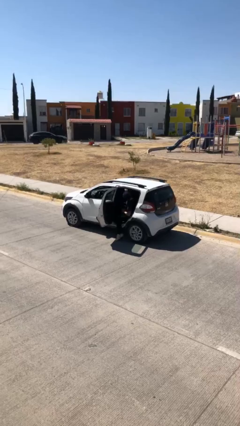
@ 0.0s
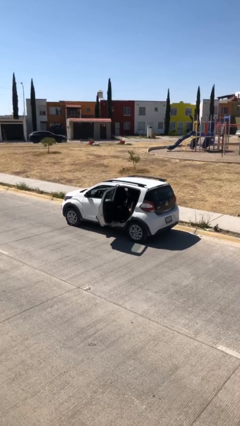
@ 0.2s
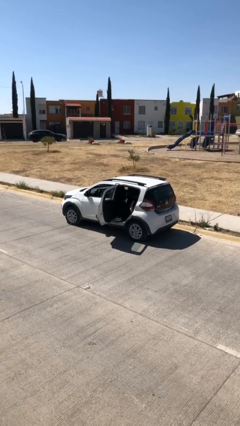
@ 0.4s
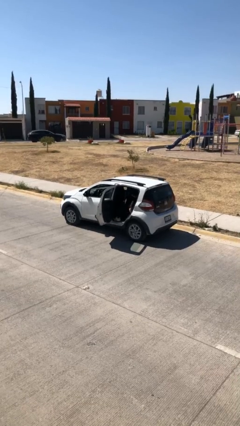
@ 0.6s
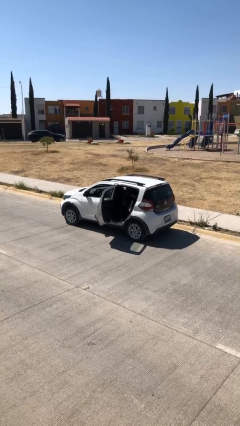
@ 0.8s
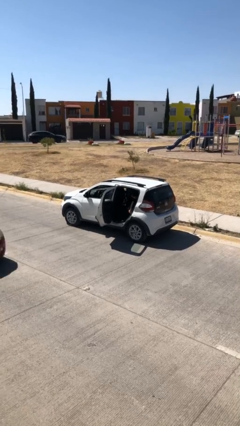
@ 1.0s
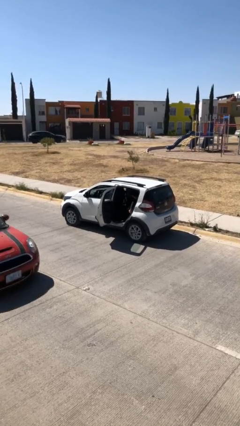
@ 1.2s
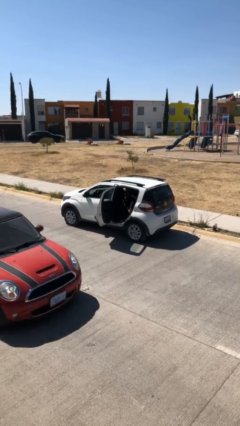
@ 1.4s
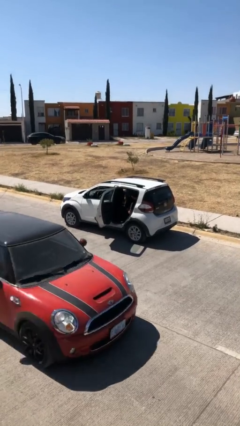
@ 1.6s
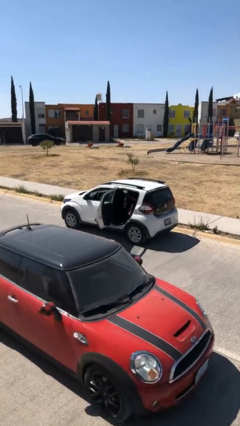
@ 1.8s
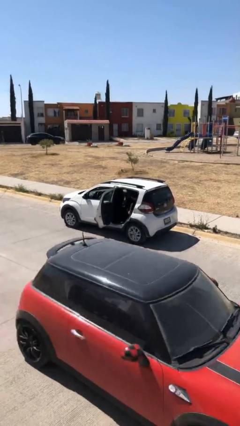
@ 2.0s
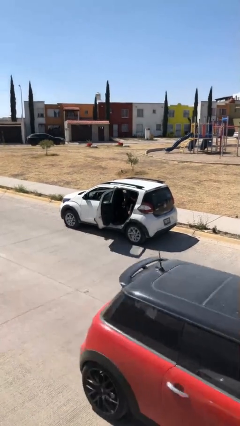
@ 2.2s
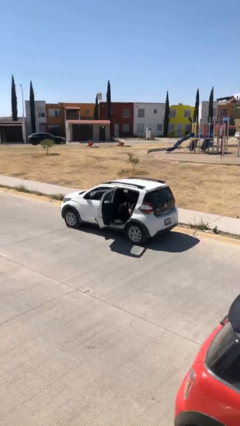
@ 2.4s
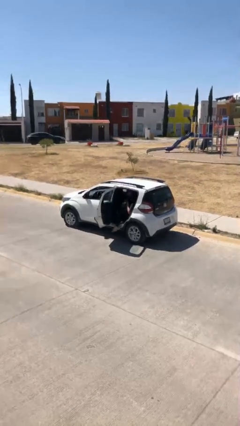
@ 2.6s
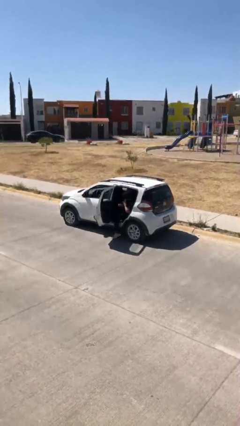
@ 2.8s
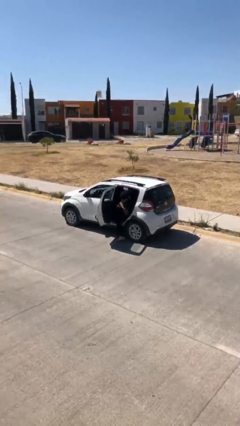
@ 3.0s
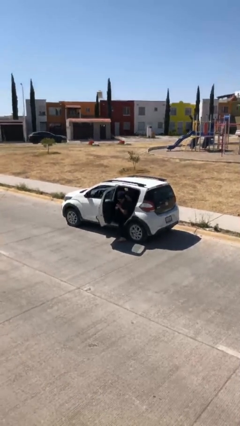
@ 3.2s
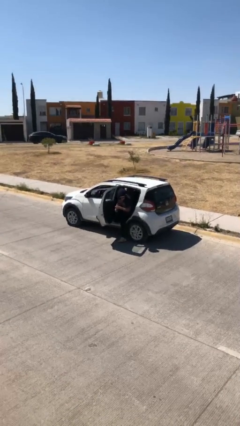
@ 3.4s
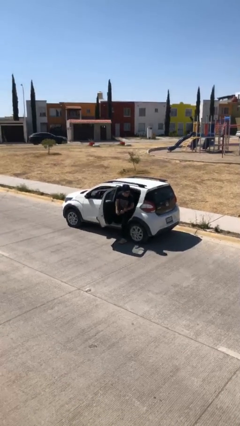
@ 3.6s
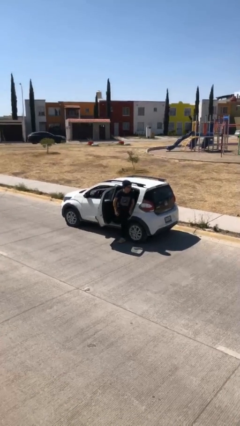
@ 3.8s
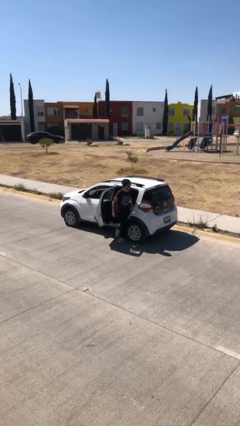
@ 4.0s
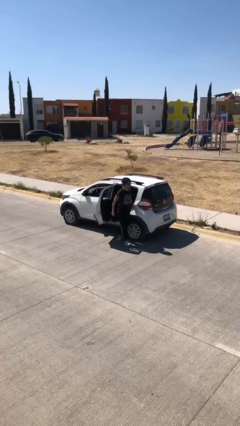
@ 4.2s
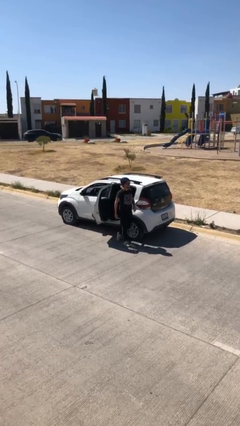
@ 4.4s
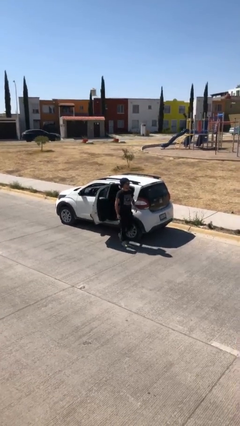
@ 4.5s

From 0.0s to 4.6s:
person exits car

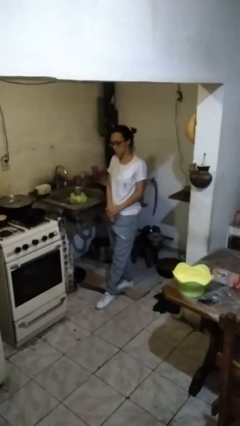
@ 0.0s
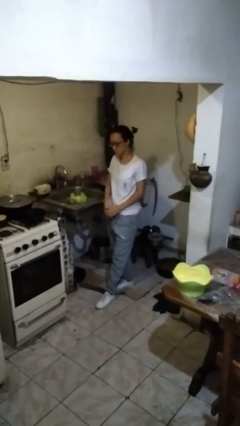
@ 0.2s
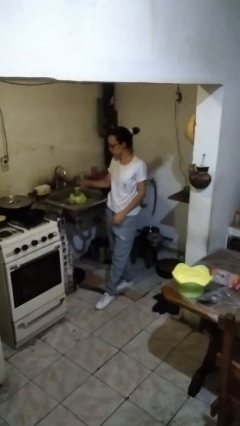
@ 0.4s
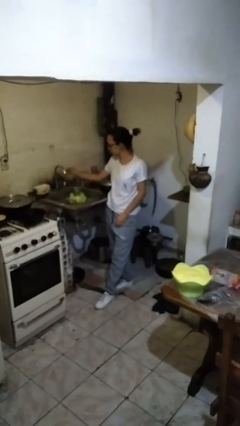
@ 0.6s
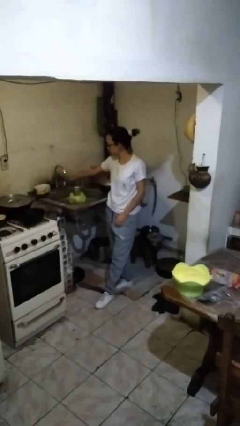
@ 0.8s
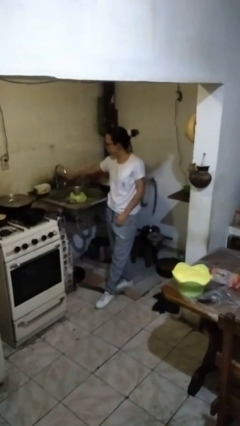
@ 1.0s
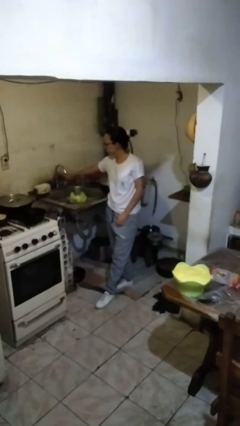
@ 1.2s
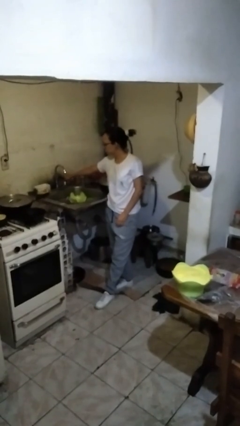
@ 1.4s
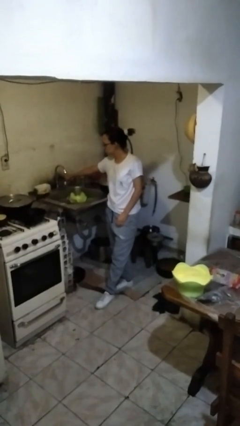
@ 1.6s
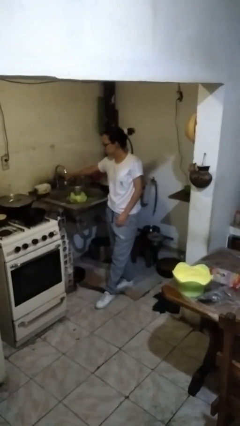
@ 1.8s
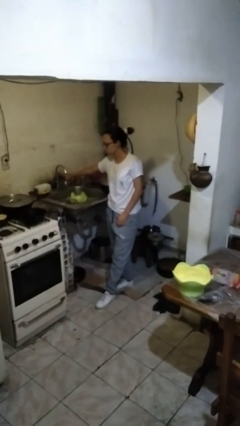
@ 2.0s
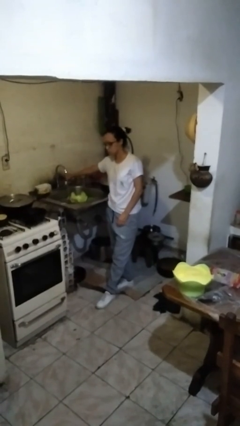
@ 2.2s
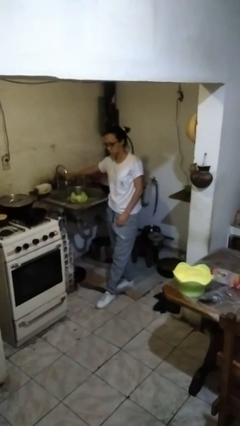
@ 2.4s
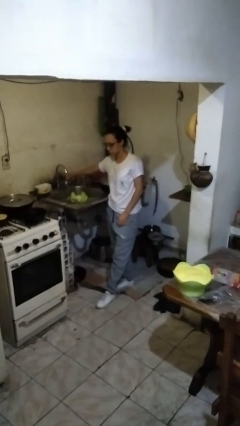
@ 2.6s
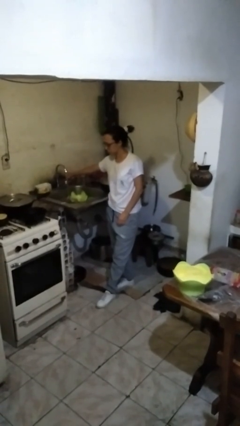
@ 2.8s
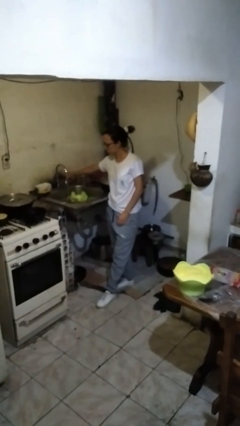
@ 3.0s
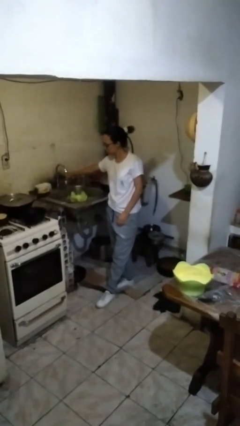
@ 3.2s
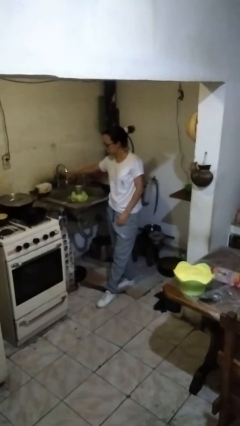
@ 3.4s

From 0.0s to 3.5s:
person turns on faucet

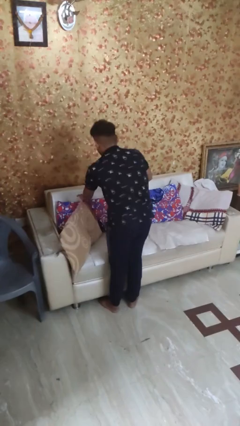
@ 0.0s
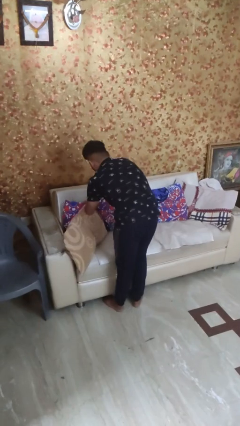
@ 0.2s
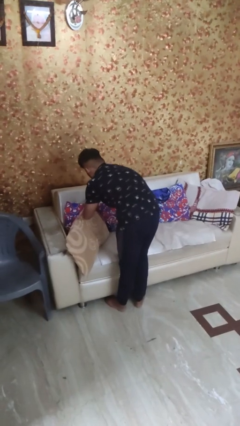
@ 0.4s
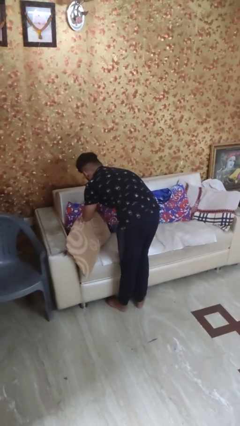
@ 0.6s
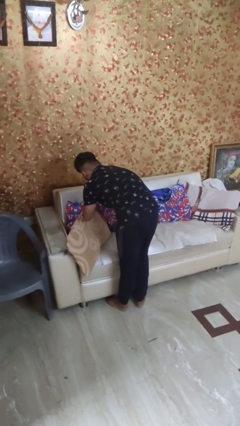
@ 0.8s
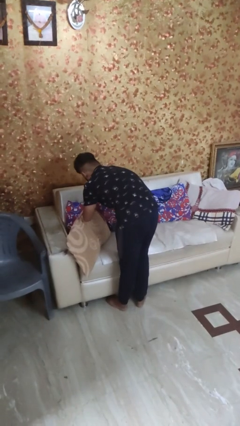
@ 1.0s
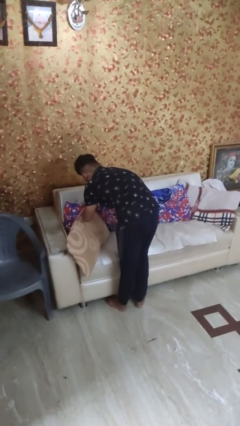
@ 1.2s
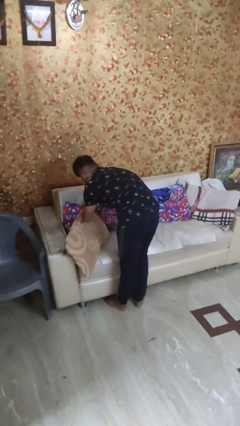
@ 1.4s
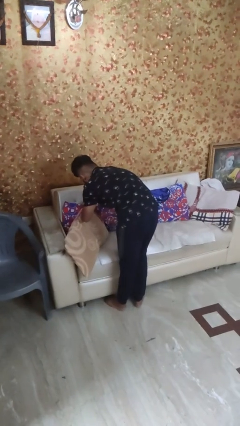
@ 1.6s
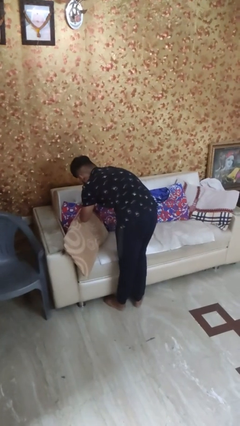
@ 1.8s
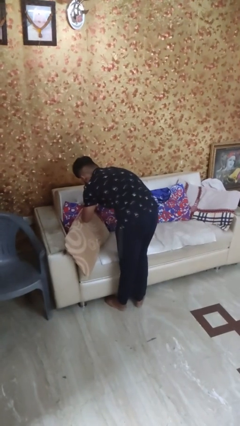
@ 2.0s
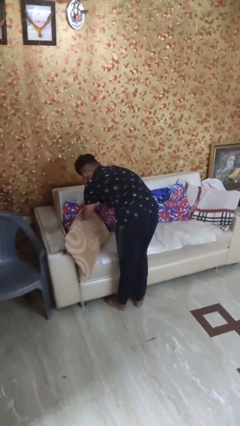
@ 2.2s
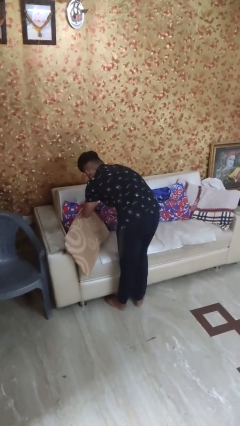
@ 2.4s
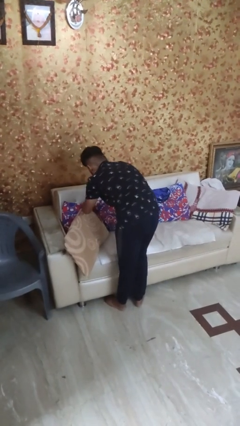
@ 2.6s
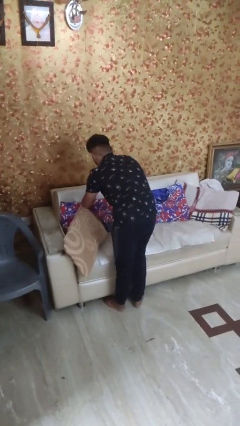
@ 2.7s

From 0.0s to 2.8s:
person searches in couch

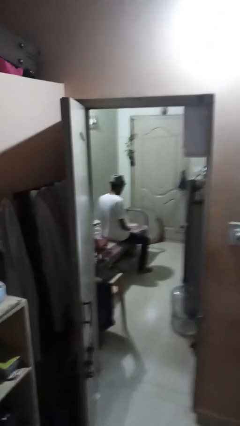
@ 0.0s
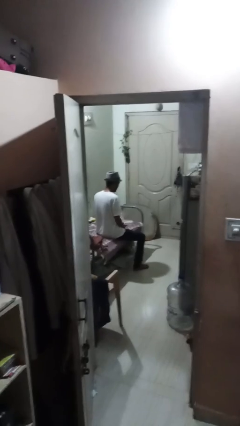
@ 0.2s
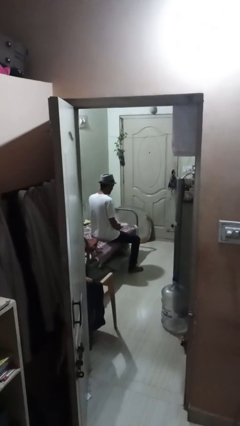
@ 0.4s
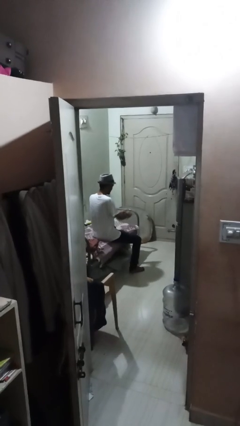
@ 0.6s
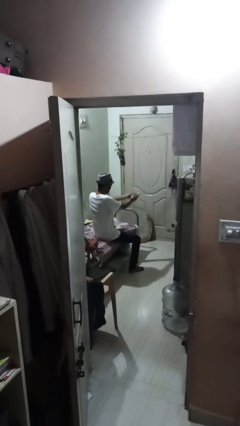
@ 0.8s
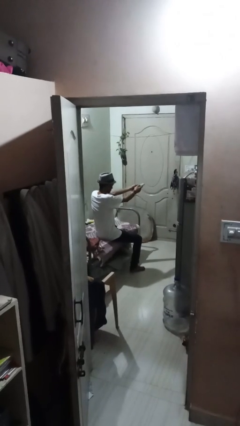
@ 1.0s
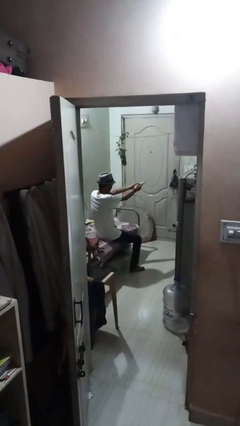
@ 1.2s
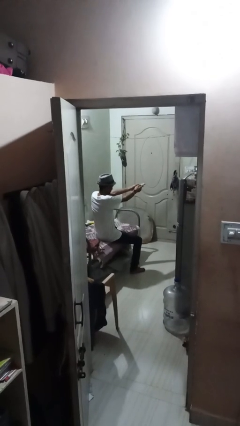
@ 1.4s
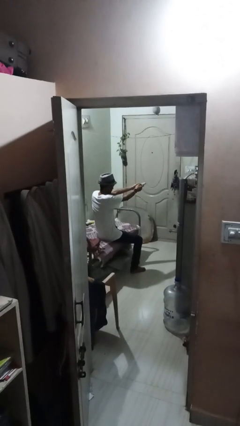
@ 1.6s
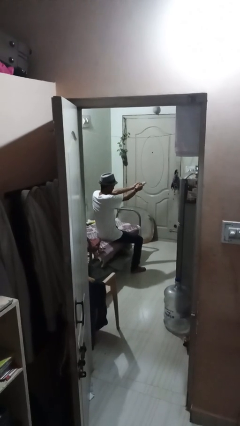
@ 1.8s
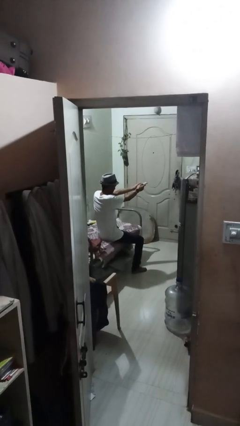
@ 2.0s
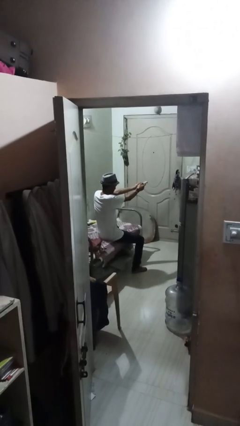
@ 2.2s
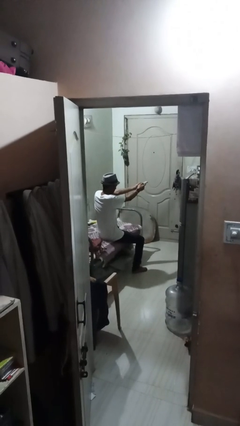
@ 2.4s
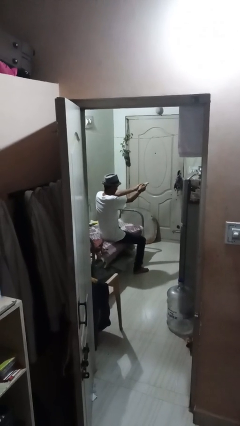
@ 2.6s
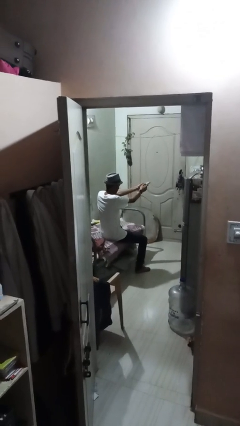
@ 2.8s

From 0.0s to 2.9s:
person uses television remote

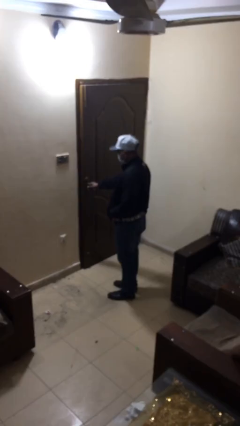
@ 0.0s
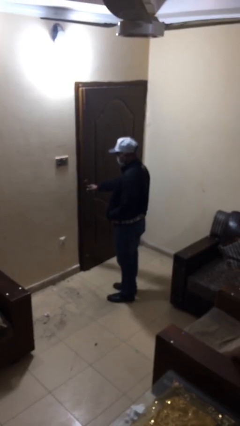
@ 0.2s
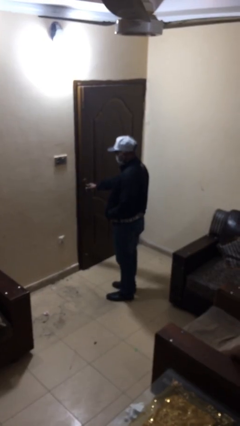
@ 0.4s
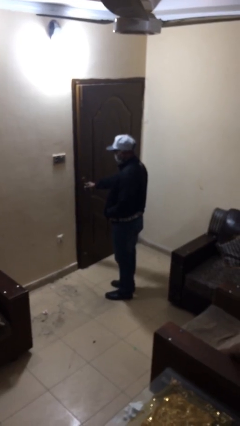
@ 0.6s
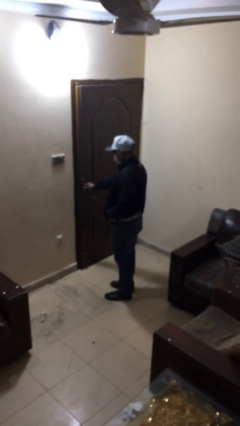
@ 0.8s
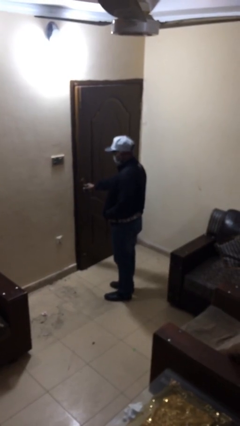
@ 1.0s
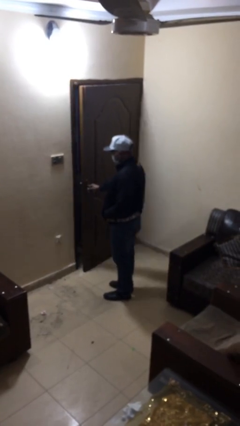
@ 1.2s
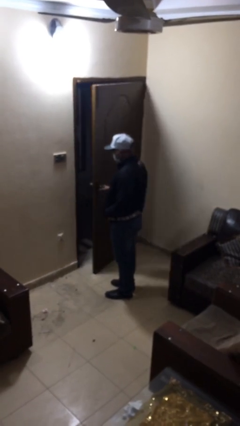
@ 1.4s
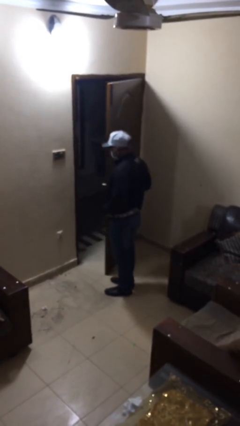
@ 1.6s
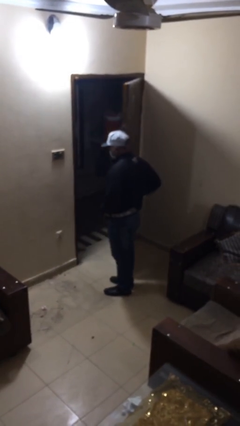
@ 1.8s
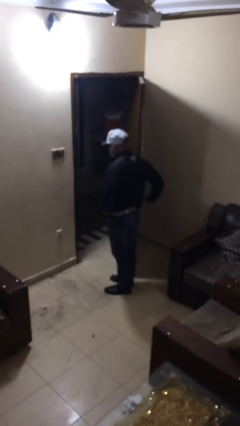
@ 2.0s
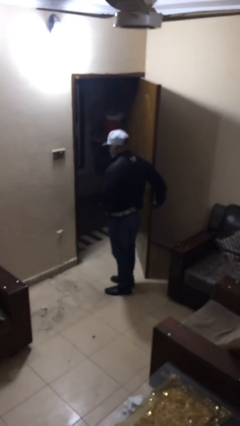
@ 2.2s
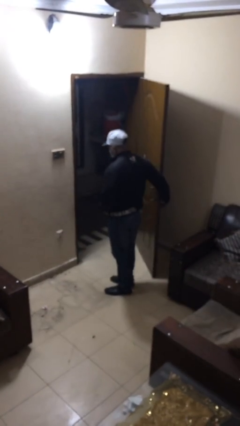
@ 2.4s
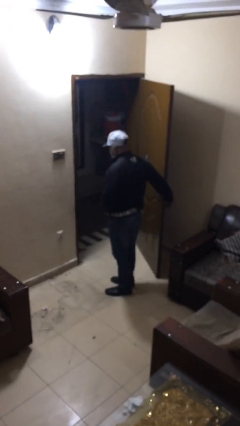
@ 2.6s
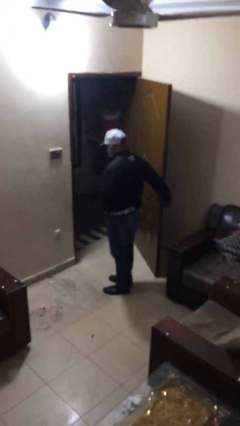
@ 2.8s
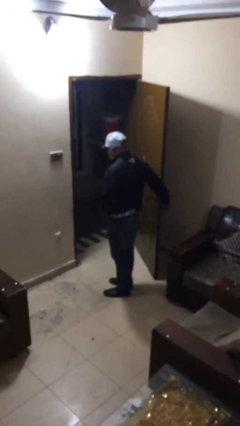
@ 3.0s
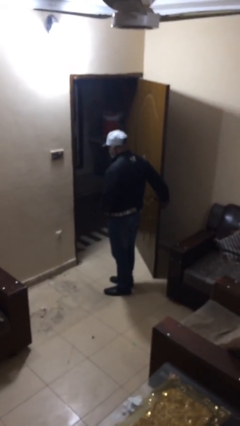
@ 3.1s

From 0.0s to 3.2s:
person opens facility door

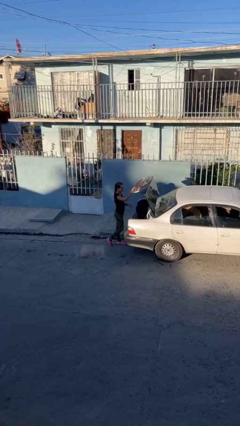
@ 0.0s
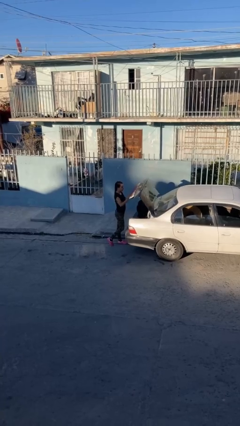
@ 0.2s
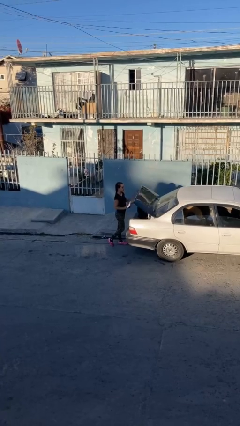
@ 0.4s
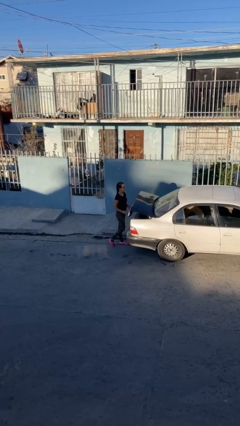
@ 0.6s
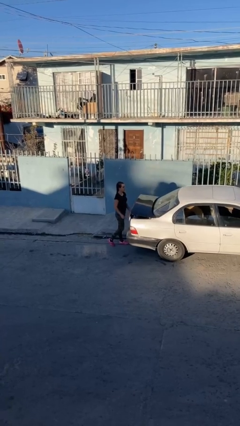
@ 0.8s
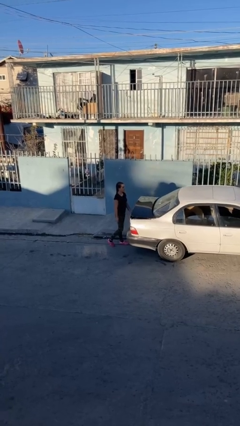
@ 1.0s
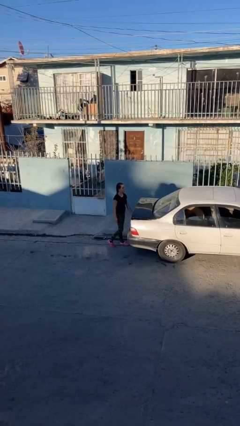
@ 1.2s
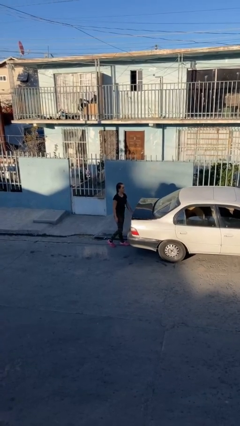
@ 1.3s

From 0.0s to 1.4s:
person closes car trunk
